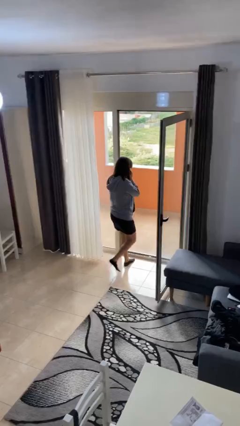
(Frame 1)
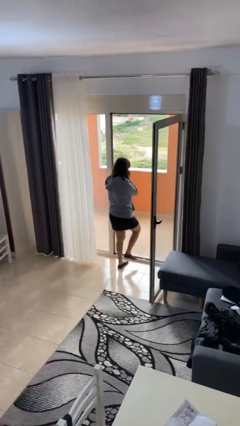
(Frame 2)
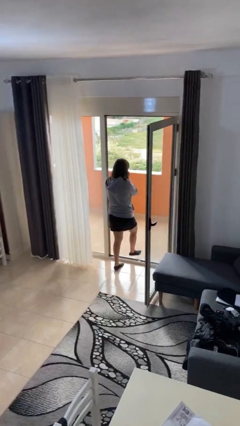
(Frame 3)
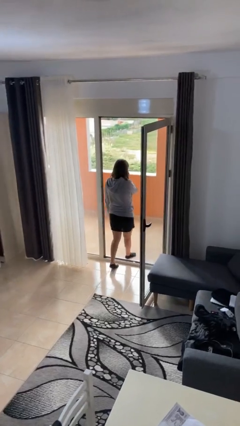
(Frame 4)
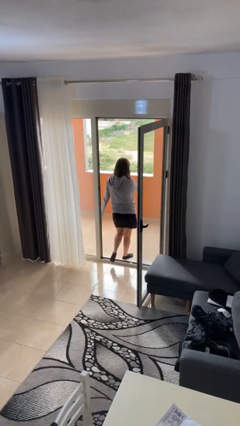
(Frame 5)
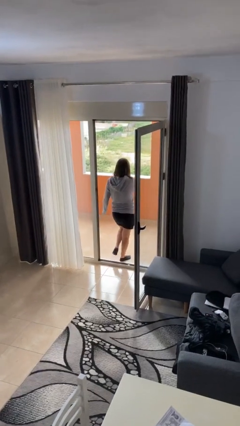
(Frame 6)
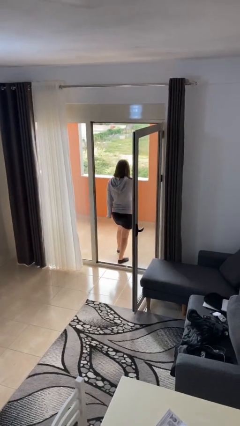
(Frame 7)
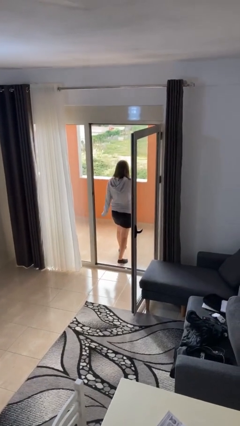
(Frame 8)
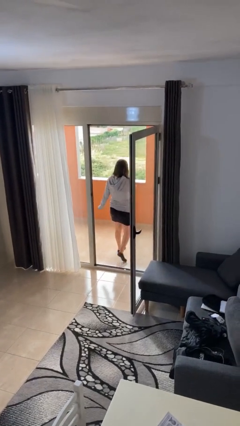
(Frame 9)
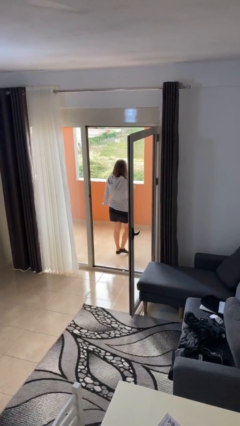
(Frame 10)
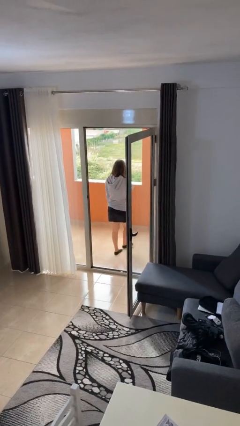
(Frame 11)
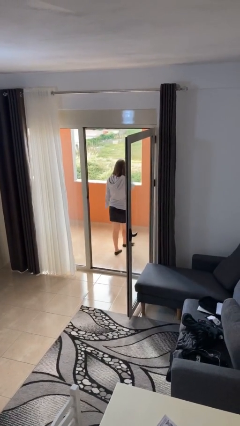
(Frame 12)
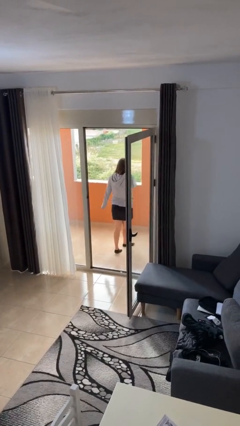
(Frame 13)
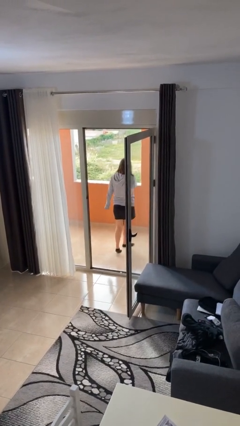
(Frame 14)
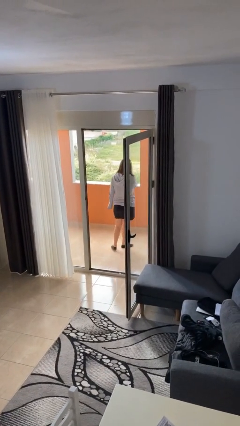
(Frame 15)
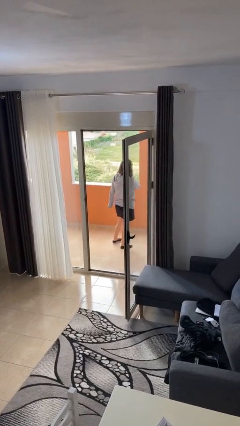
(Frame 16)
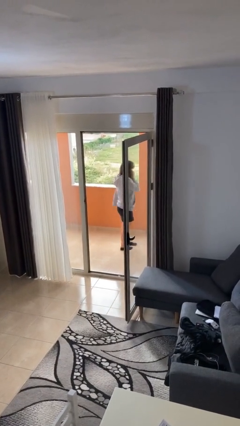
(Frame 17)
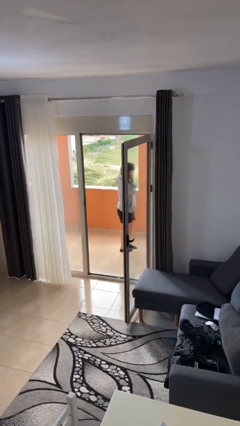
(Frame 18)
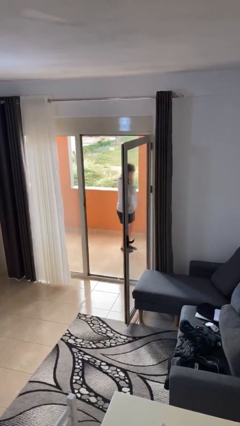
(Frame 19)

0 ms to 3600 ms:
person exits scene through structure

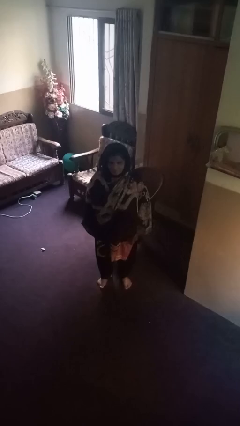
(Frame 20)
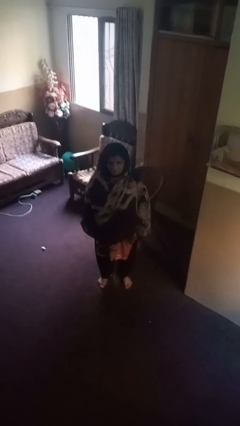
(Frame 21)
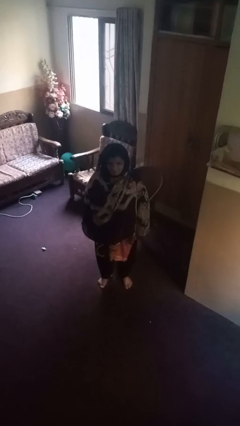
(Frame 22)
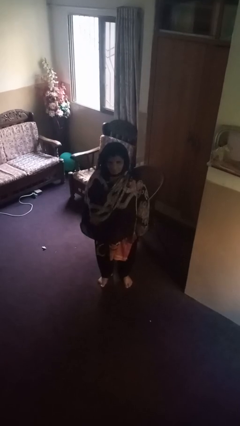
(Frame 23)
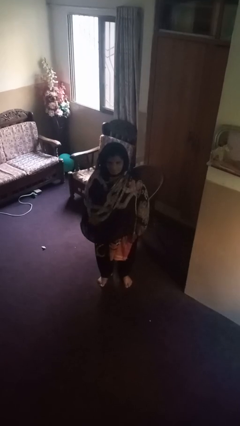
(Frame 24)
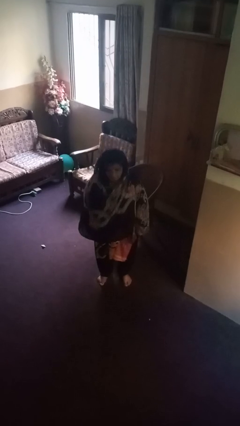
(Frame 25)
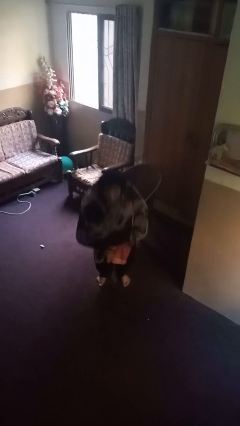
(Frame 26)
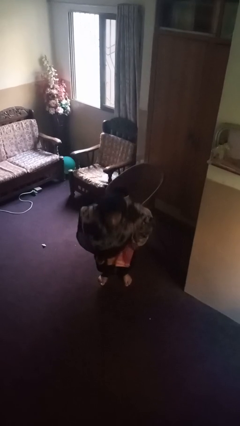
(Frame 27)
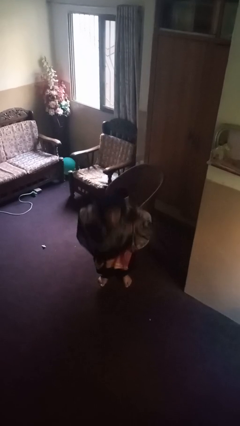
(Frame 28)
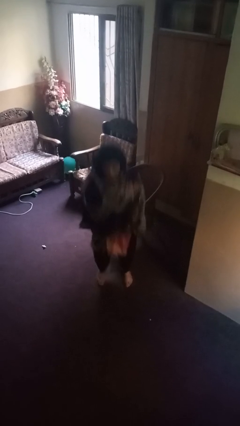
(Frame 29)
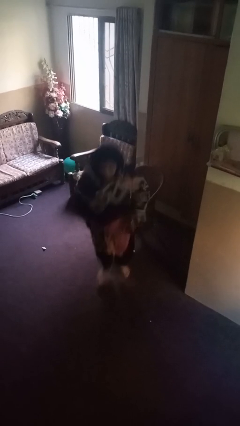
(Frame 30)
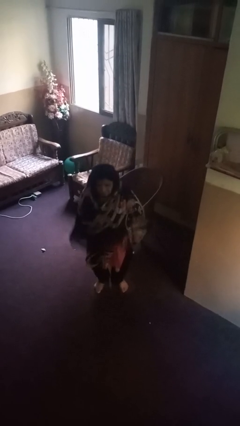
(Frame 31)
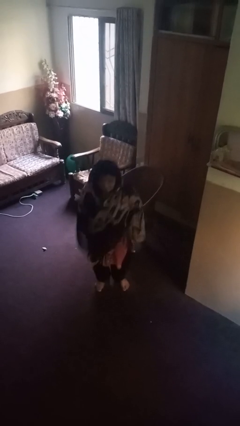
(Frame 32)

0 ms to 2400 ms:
person jumps

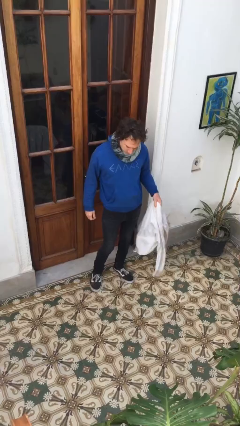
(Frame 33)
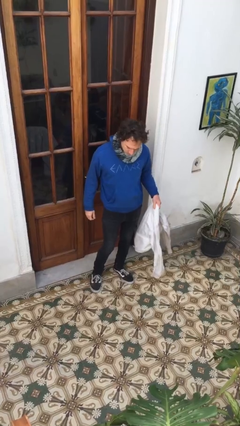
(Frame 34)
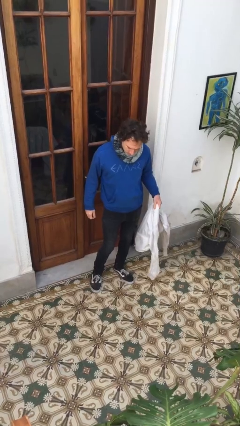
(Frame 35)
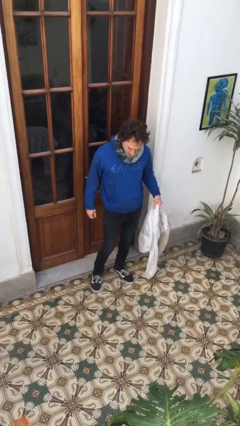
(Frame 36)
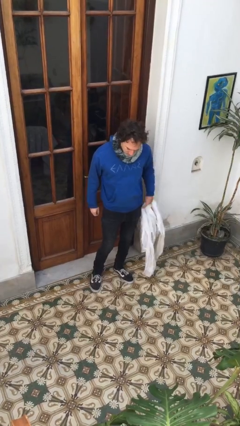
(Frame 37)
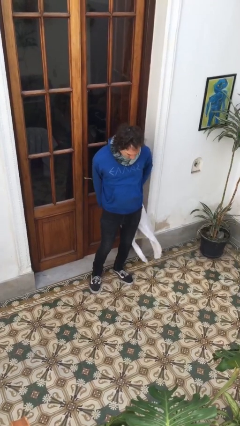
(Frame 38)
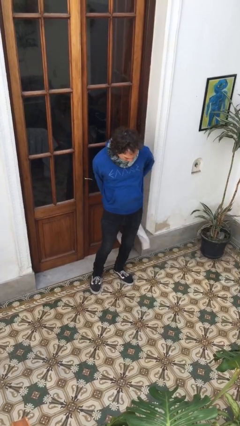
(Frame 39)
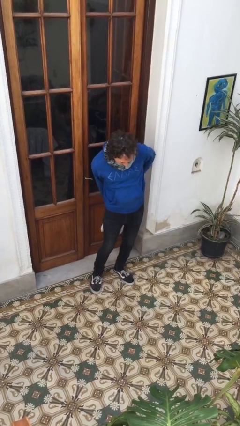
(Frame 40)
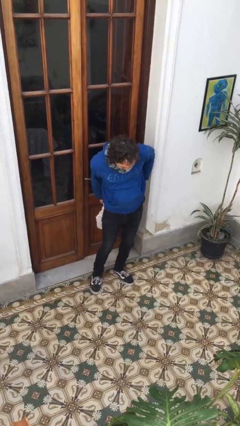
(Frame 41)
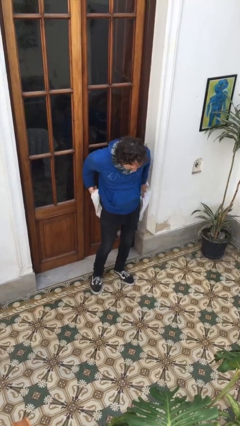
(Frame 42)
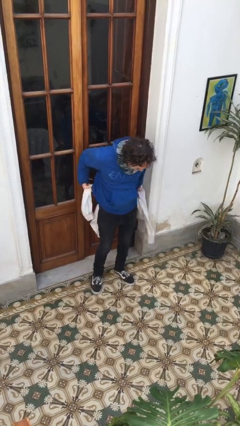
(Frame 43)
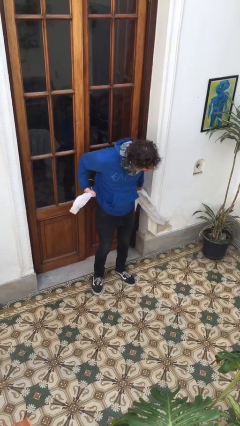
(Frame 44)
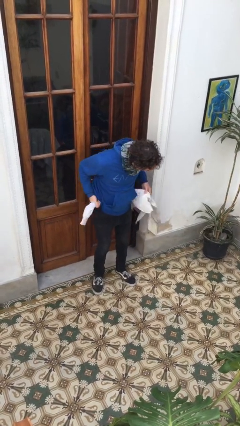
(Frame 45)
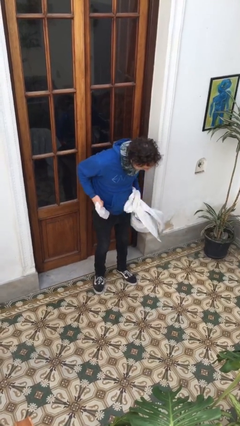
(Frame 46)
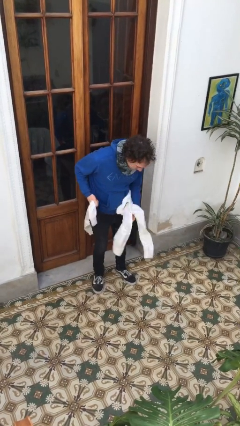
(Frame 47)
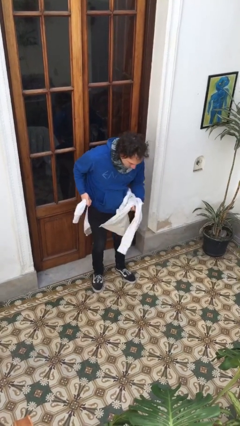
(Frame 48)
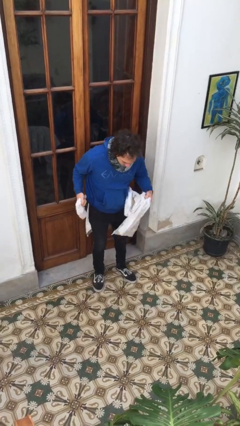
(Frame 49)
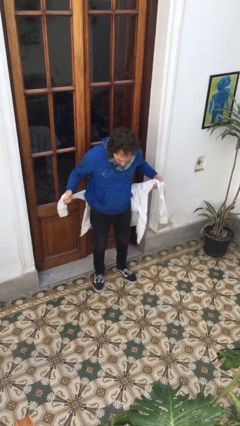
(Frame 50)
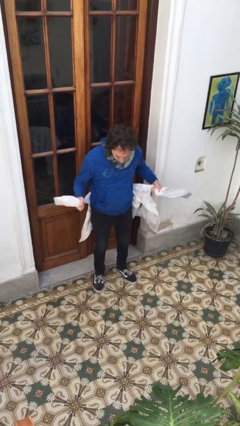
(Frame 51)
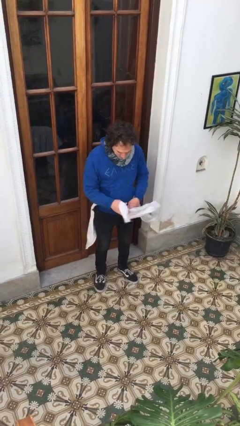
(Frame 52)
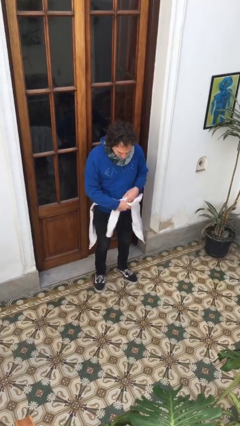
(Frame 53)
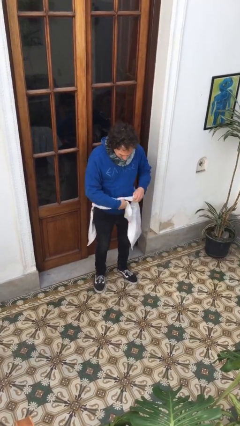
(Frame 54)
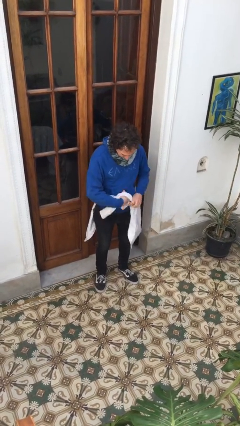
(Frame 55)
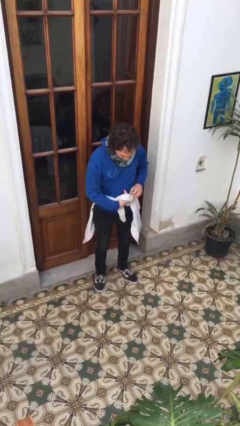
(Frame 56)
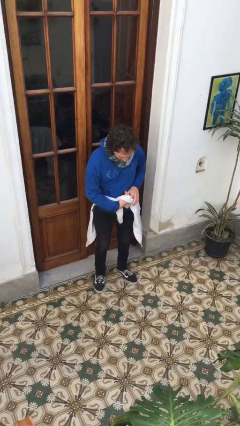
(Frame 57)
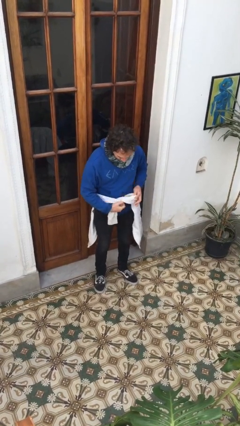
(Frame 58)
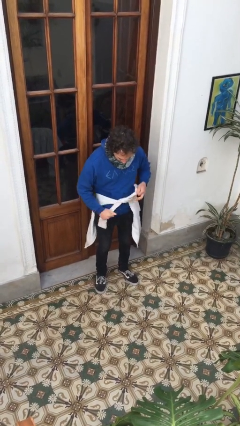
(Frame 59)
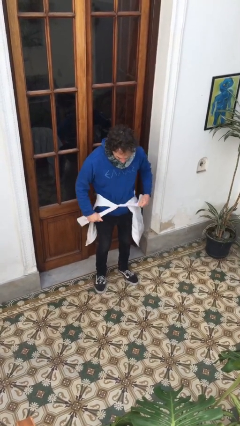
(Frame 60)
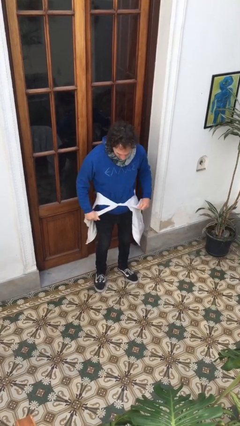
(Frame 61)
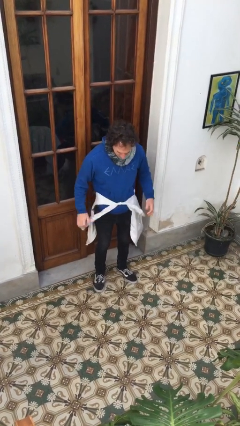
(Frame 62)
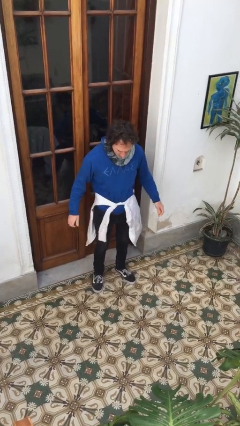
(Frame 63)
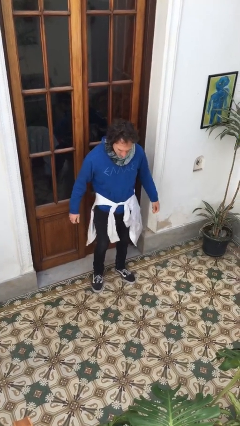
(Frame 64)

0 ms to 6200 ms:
person ties jacket around waist

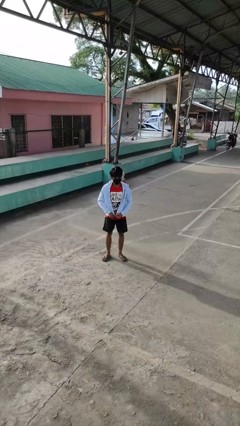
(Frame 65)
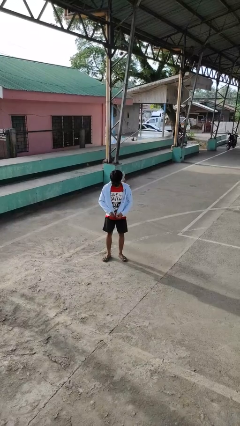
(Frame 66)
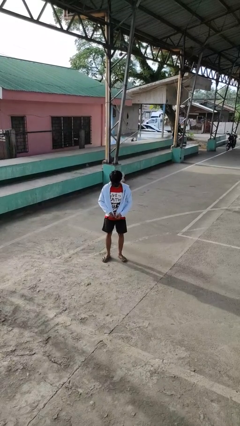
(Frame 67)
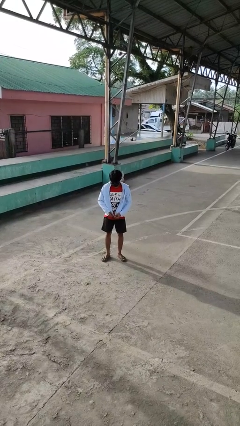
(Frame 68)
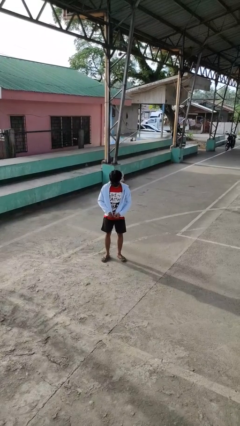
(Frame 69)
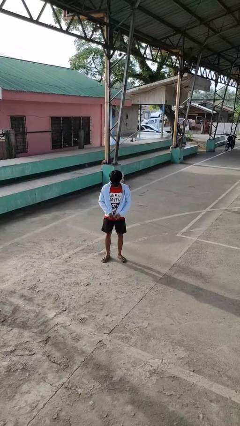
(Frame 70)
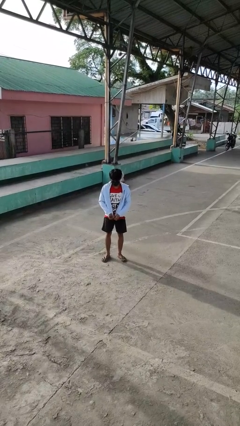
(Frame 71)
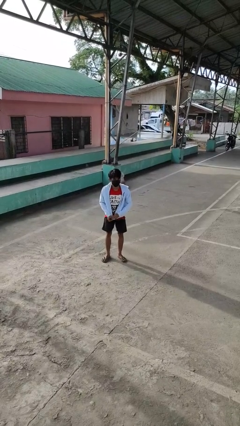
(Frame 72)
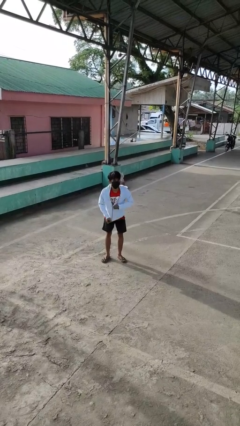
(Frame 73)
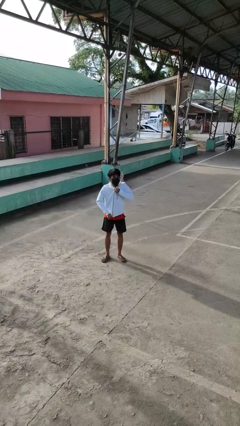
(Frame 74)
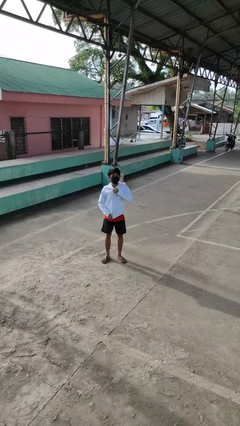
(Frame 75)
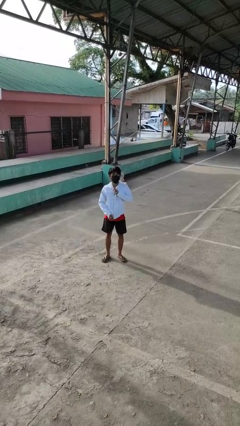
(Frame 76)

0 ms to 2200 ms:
person zips up jacket

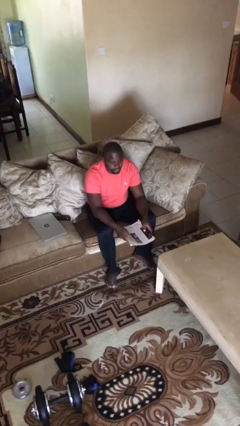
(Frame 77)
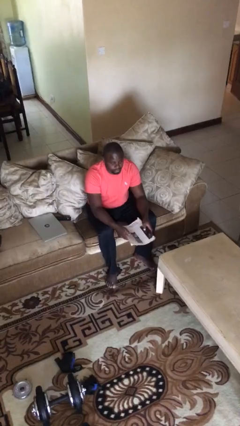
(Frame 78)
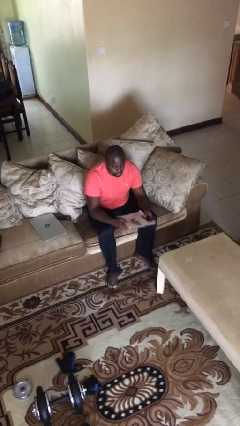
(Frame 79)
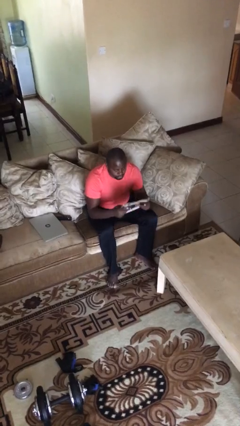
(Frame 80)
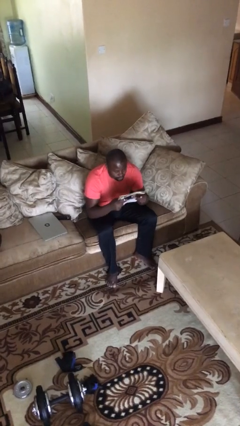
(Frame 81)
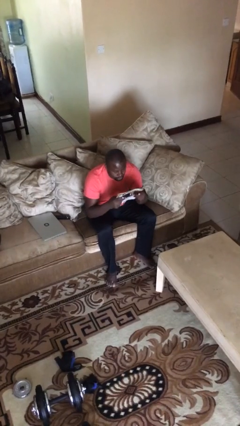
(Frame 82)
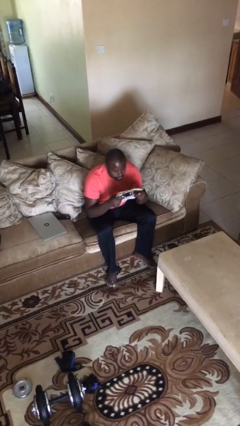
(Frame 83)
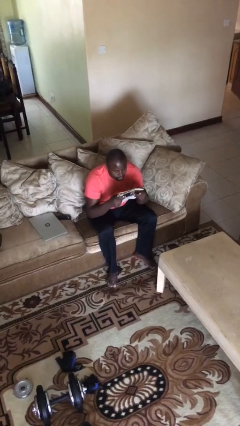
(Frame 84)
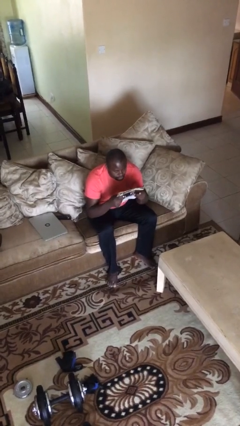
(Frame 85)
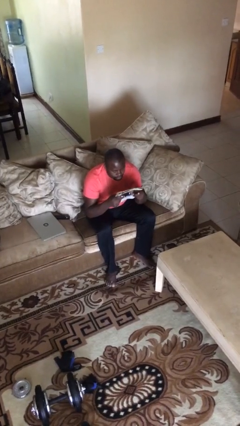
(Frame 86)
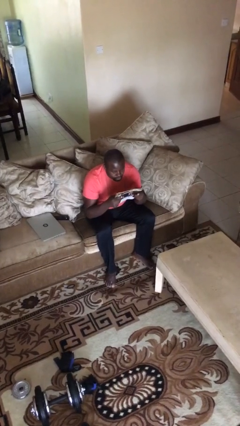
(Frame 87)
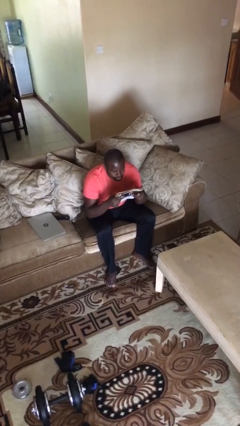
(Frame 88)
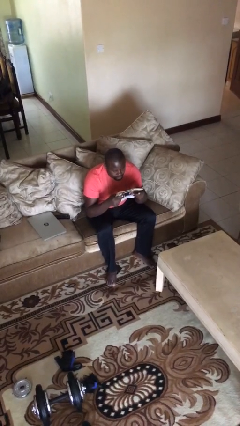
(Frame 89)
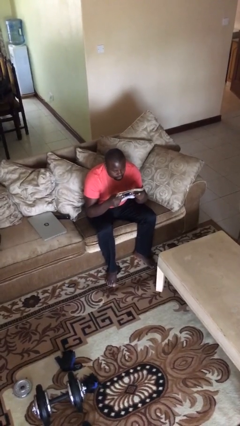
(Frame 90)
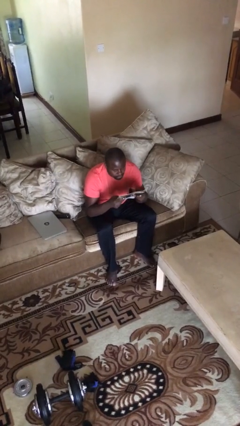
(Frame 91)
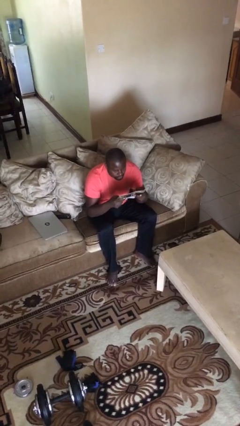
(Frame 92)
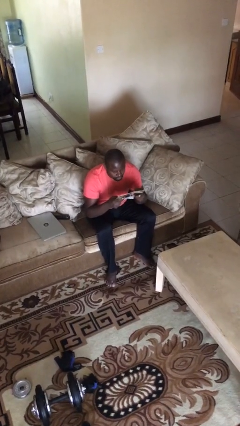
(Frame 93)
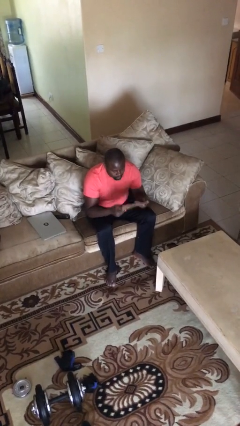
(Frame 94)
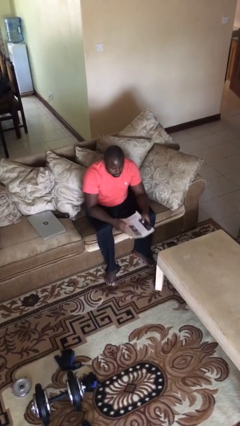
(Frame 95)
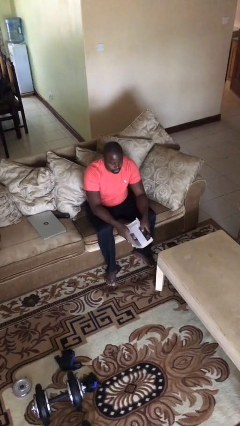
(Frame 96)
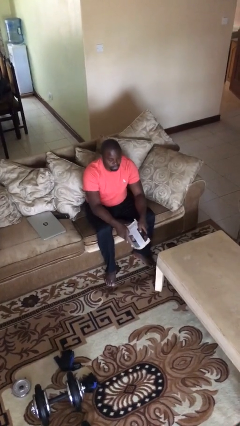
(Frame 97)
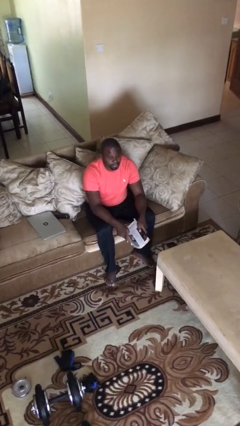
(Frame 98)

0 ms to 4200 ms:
person reads document
